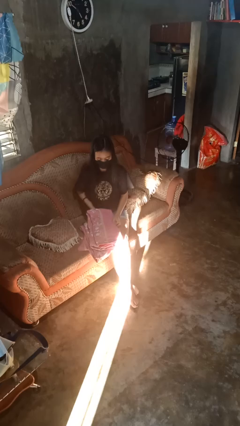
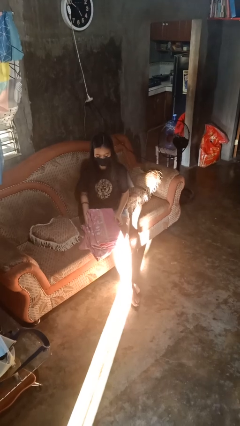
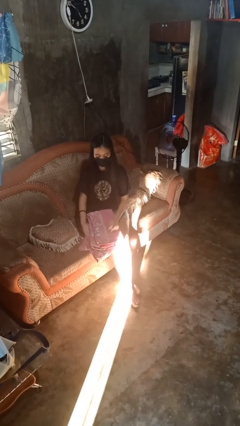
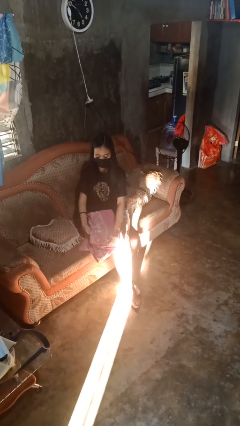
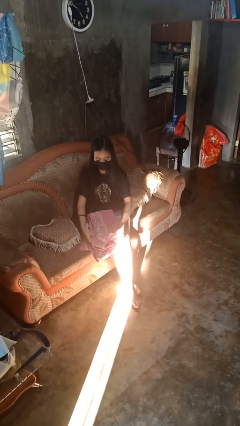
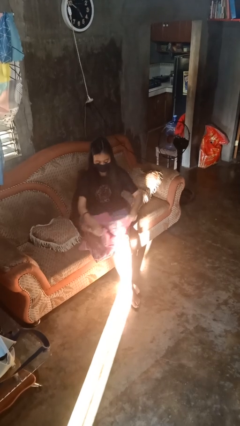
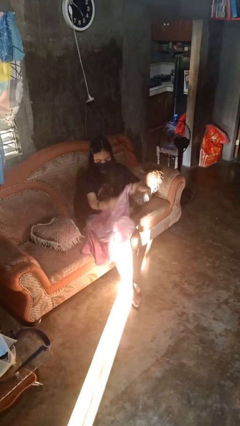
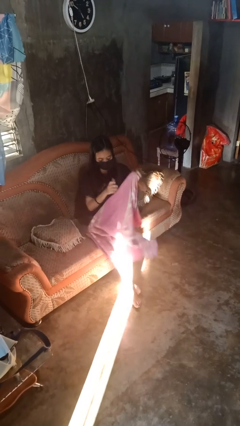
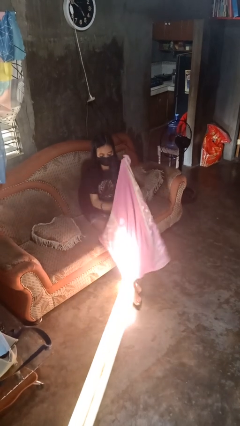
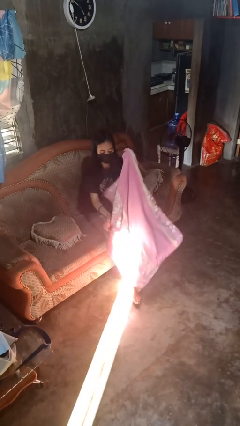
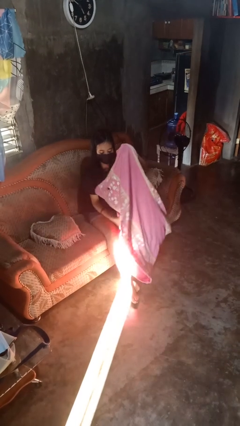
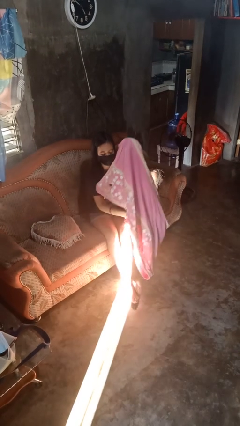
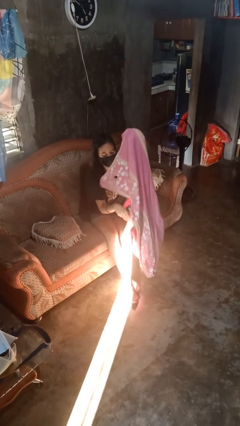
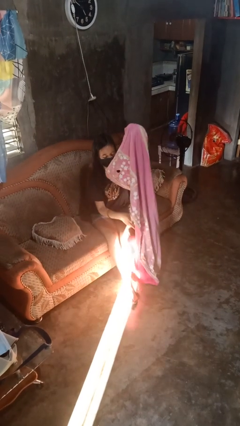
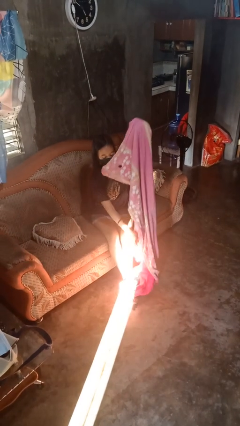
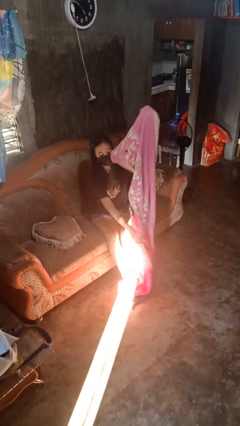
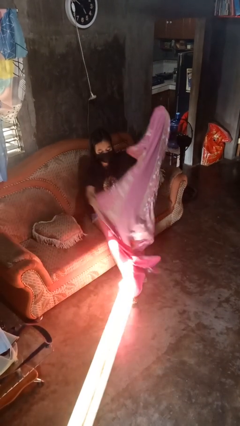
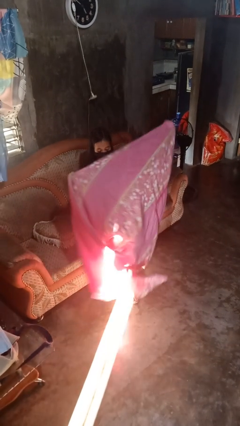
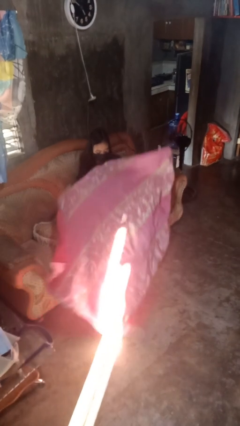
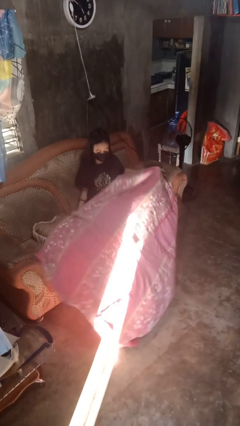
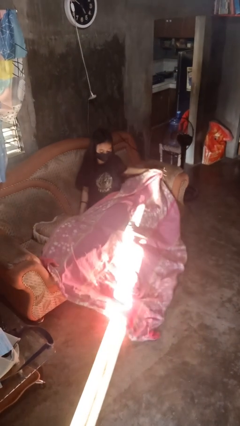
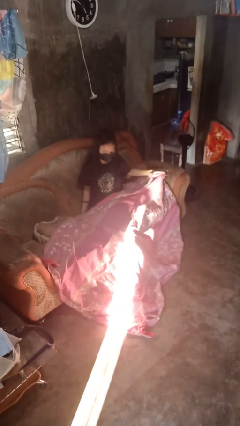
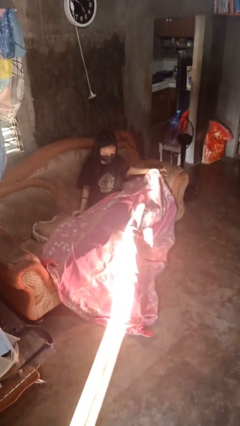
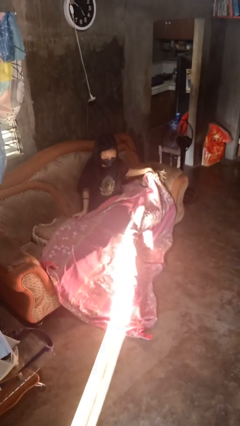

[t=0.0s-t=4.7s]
person unfolds blanket

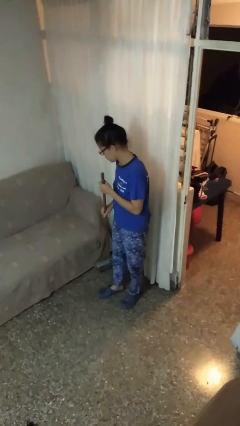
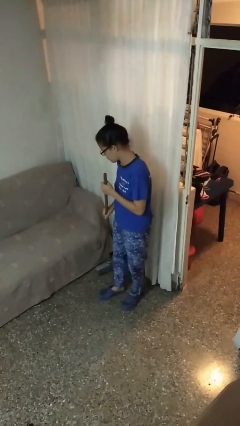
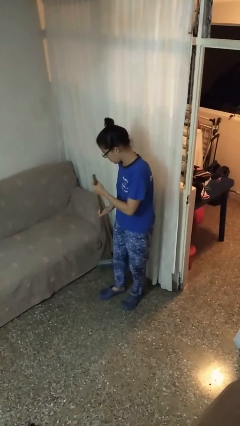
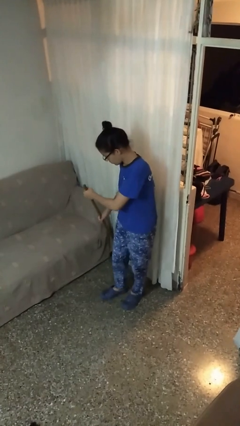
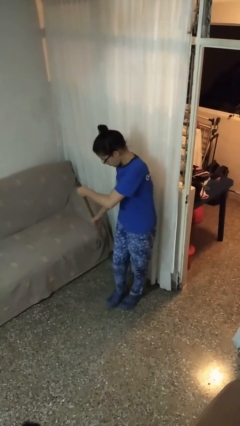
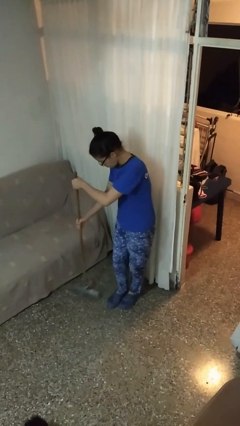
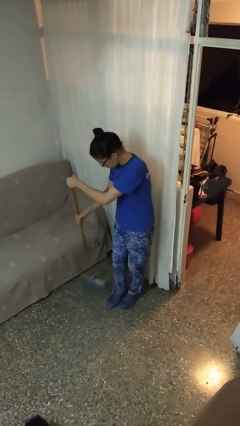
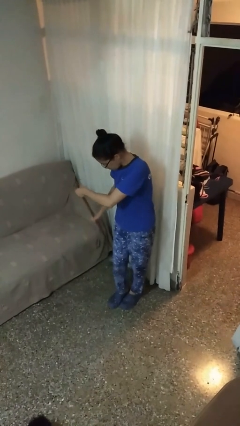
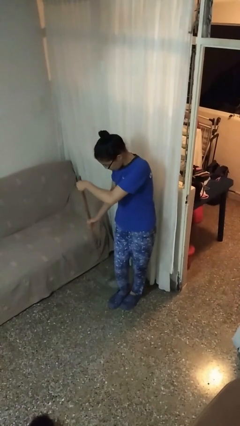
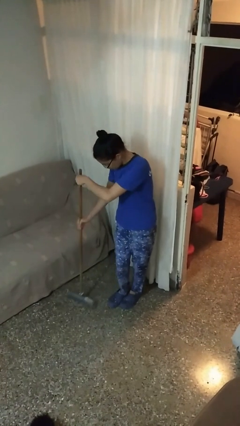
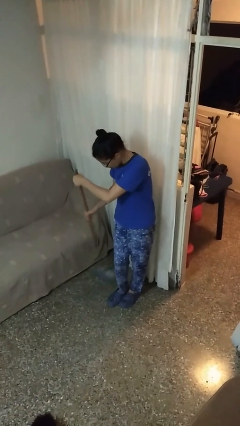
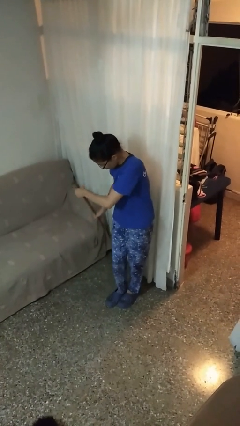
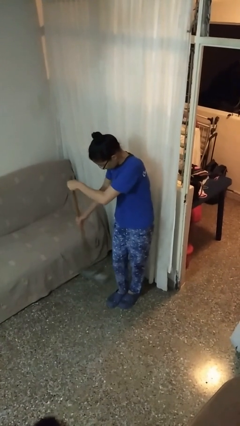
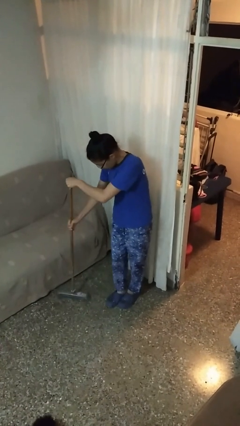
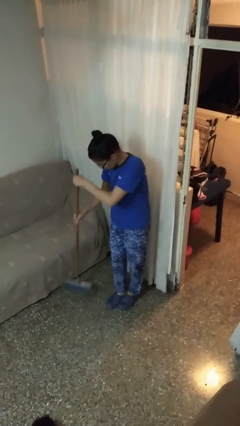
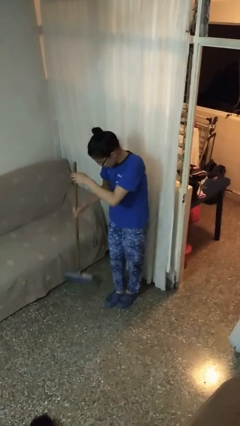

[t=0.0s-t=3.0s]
person sweeps floor

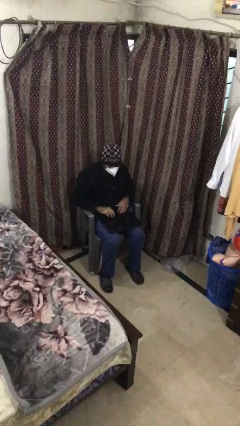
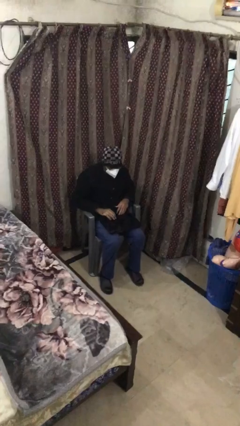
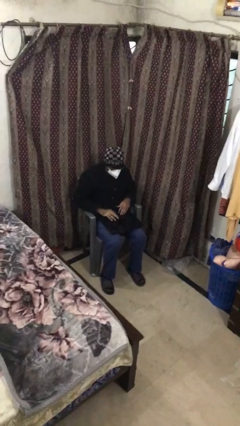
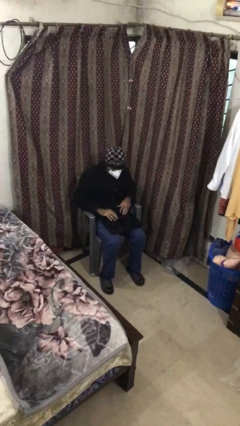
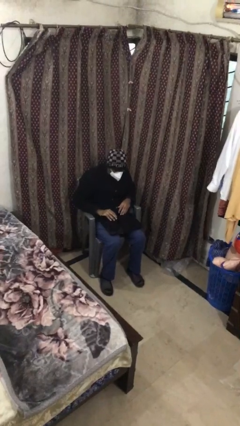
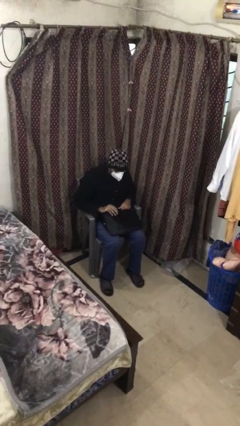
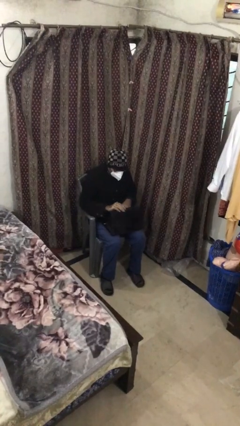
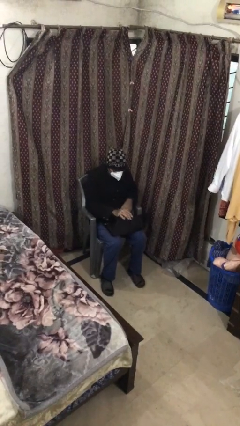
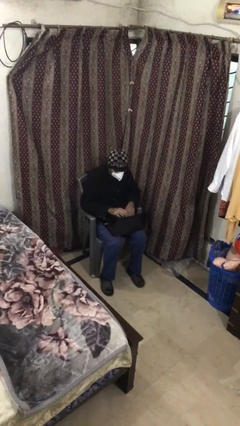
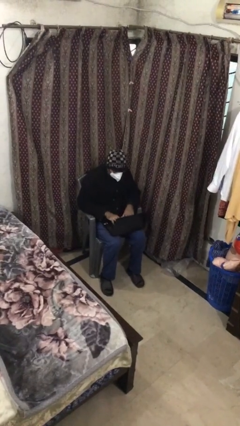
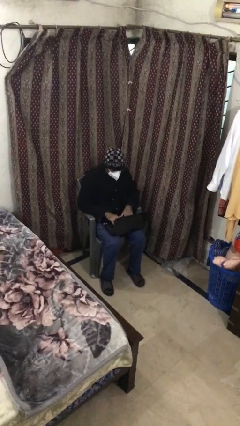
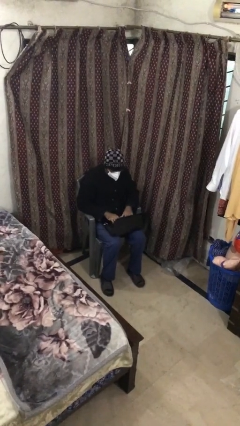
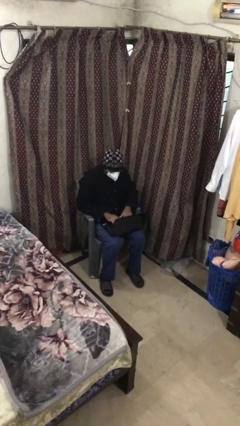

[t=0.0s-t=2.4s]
person interacts with laptop

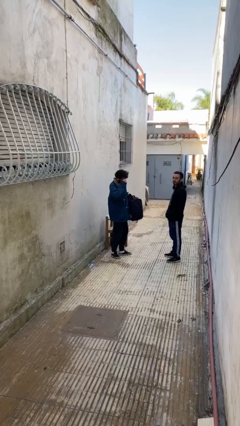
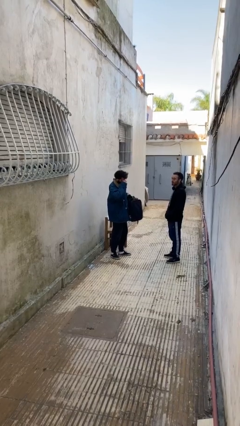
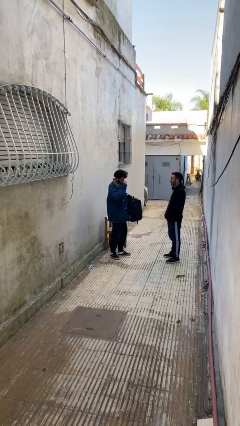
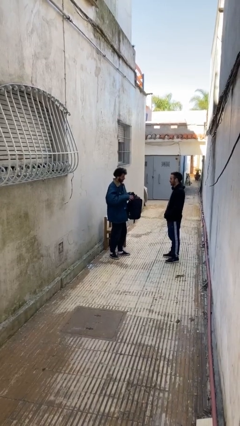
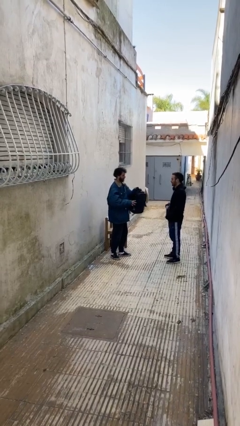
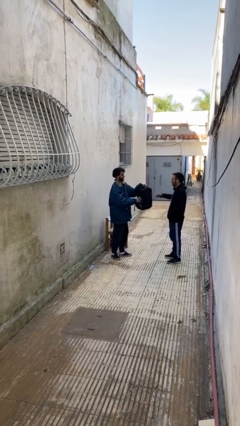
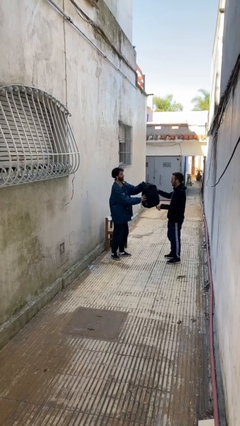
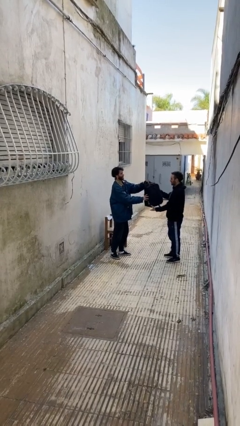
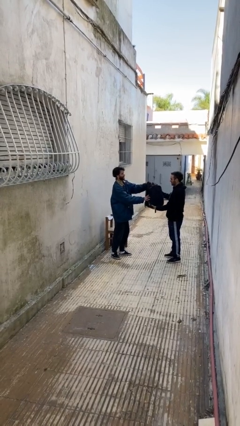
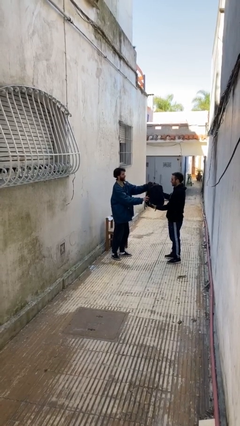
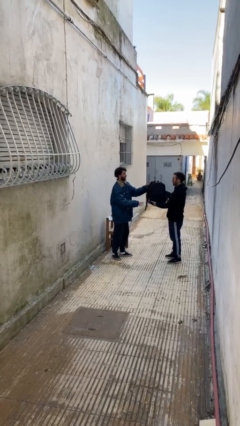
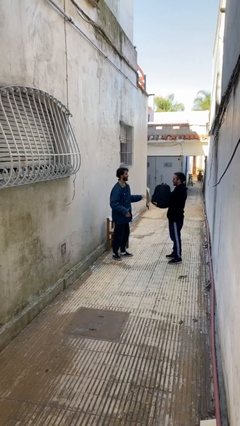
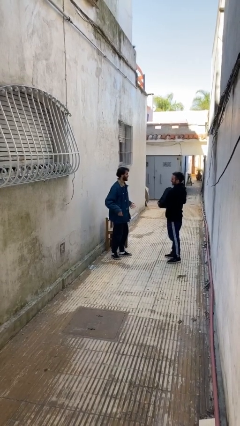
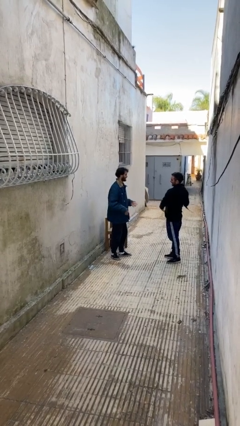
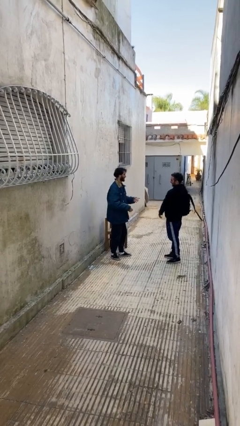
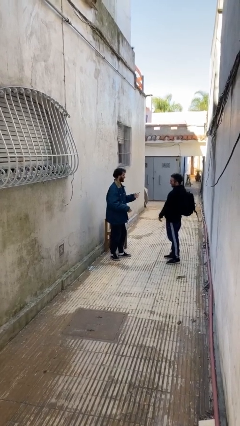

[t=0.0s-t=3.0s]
person transfers object to person

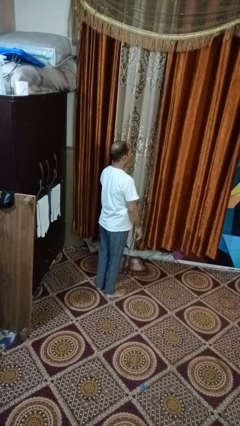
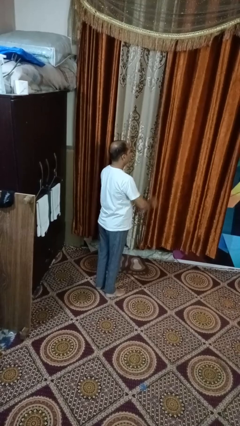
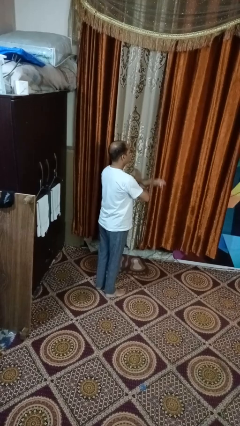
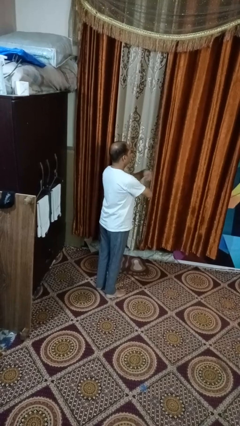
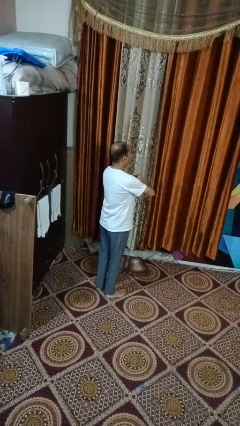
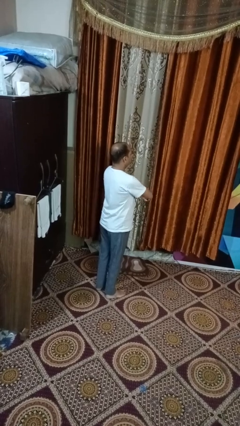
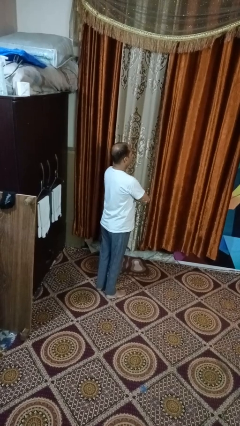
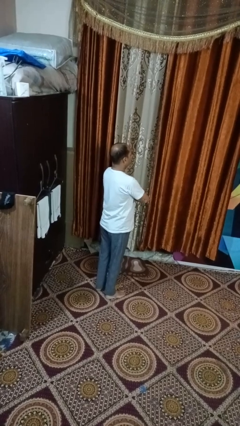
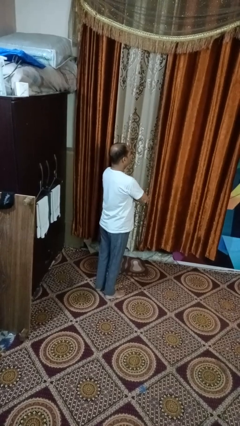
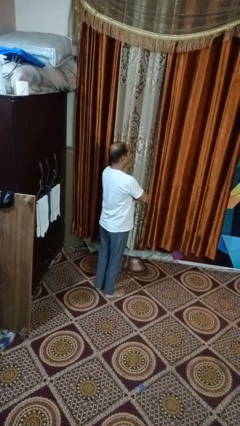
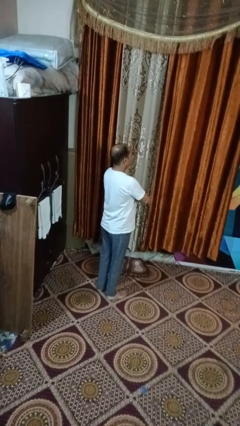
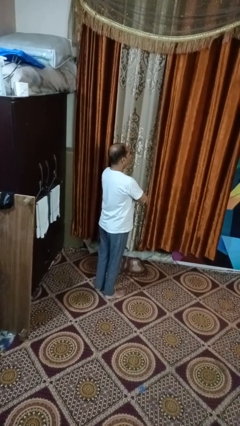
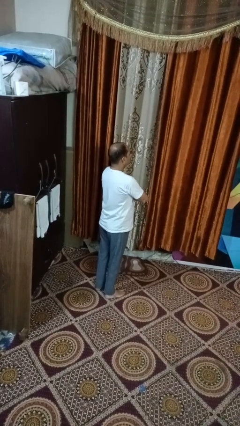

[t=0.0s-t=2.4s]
person crosses arms

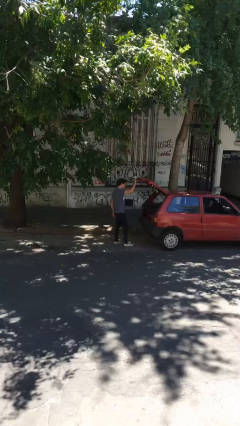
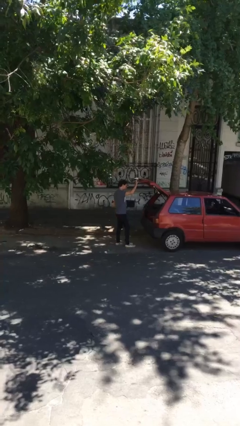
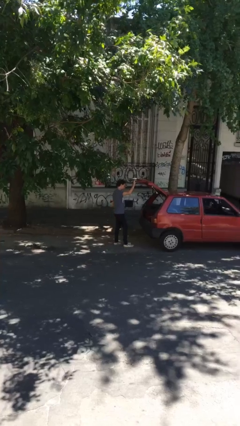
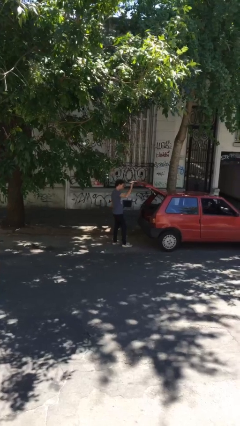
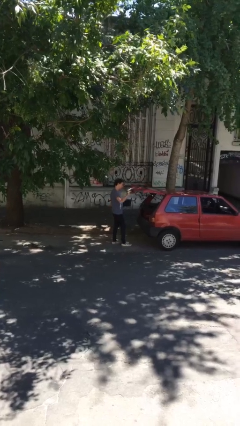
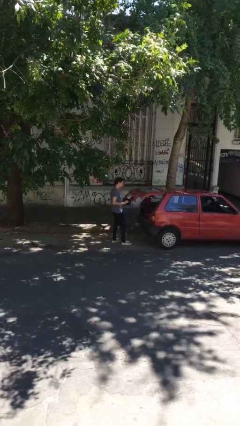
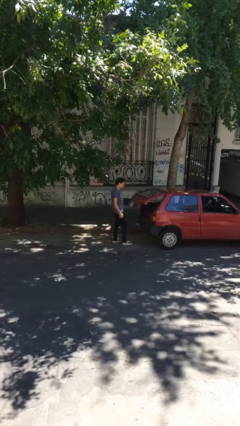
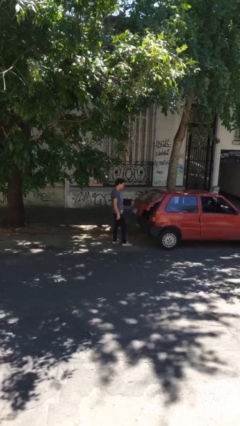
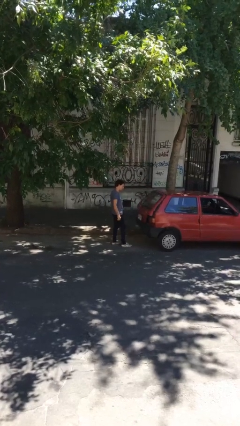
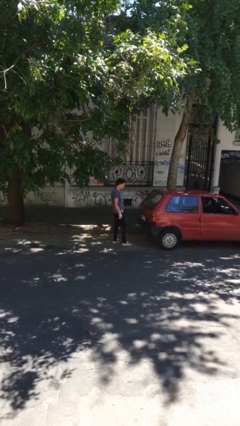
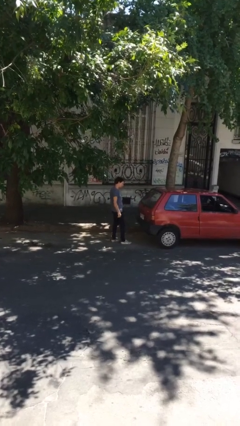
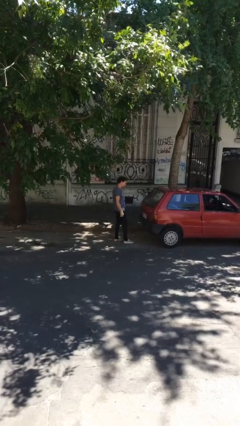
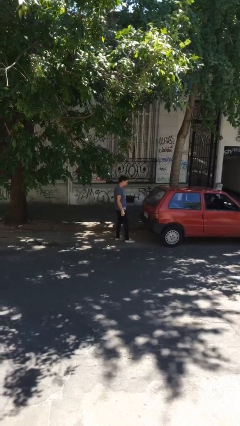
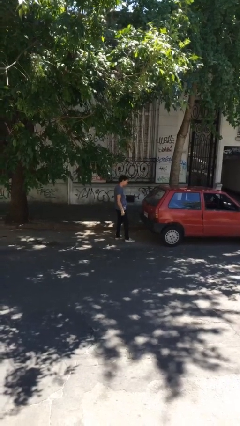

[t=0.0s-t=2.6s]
person closes car trunk
